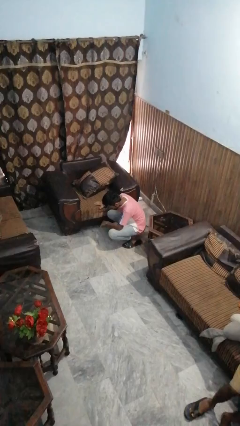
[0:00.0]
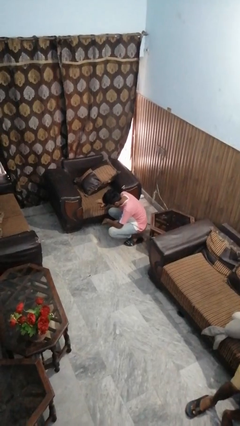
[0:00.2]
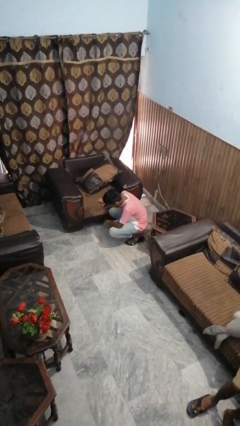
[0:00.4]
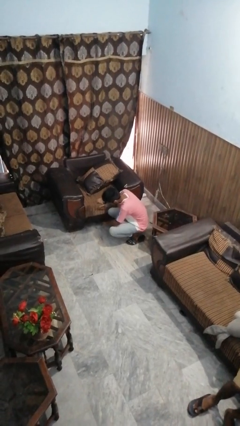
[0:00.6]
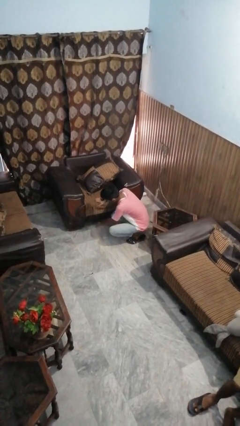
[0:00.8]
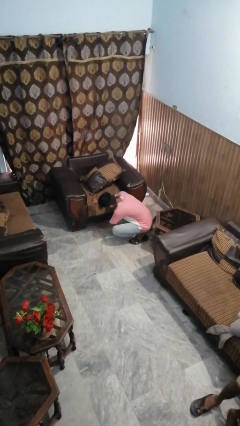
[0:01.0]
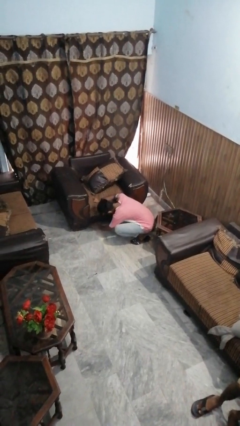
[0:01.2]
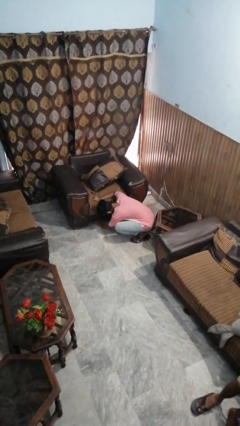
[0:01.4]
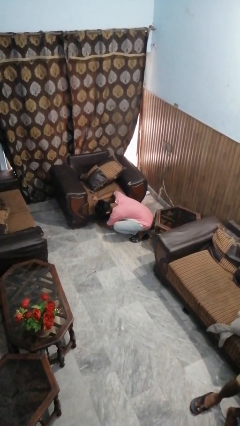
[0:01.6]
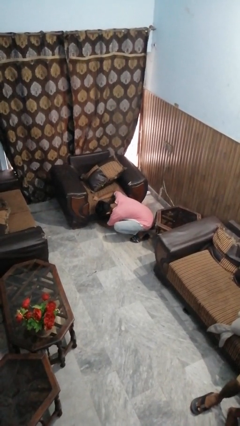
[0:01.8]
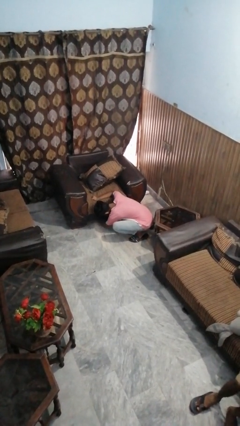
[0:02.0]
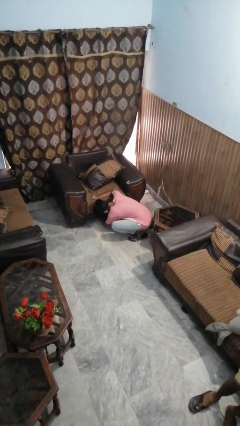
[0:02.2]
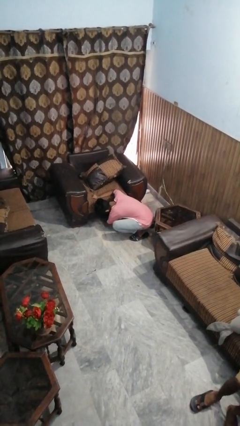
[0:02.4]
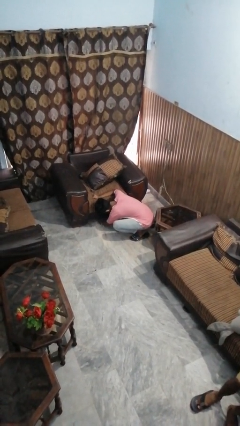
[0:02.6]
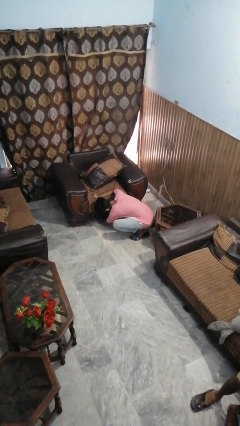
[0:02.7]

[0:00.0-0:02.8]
person searches under couch

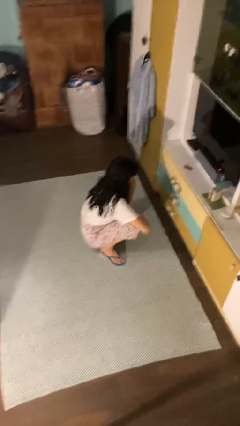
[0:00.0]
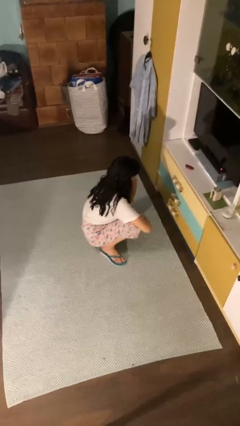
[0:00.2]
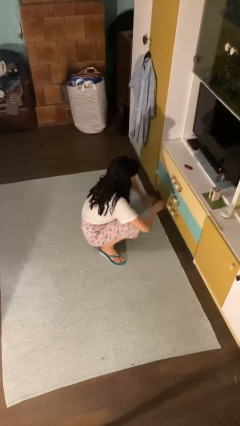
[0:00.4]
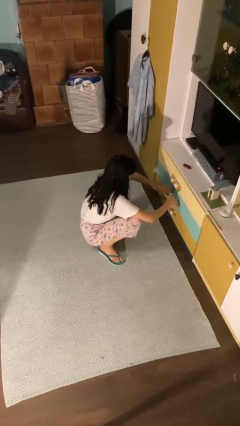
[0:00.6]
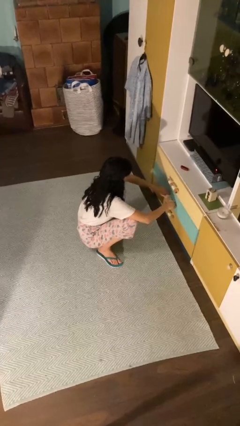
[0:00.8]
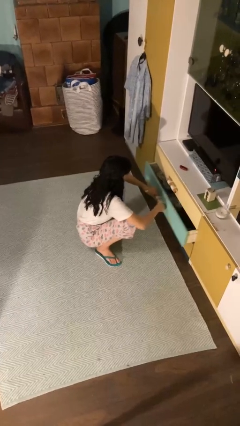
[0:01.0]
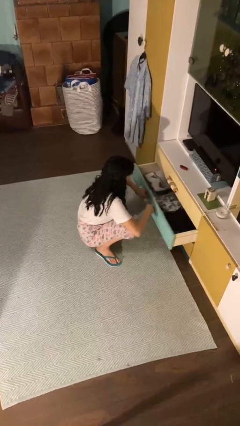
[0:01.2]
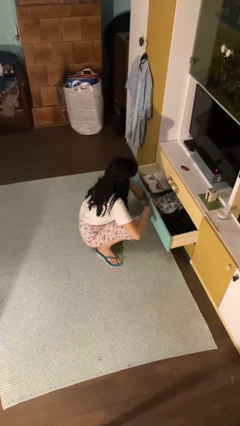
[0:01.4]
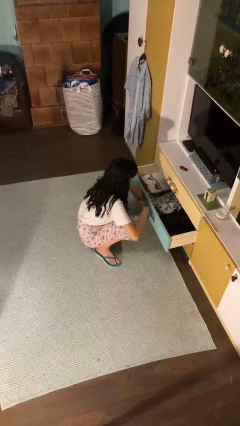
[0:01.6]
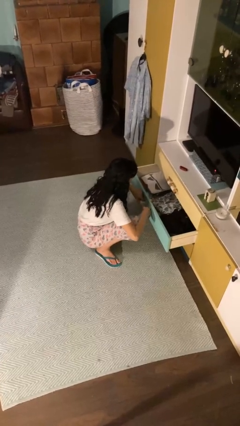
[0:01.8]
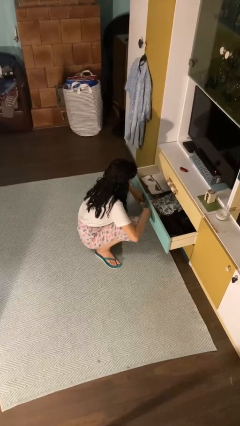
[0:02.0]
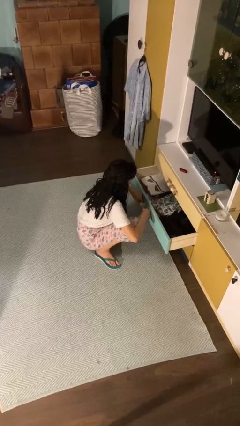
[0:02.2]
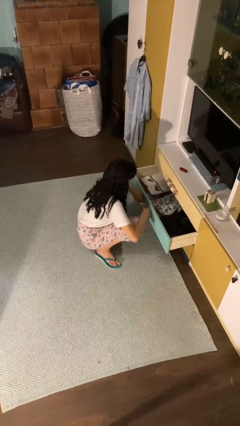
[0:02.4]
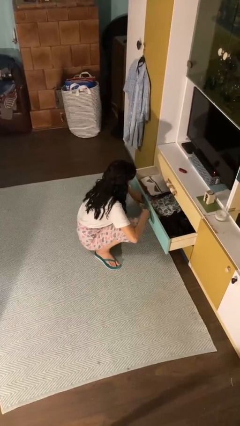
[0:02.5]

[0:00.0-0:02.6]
person opens dresser drawer

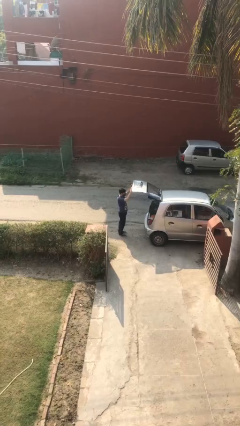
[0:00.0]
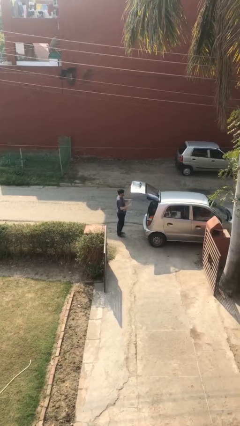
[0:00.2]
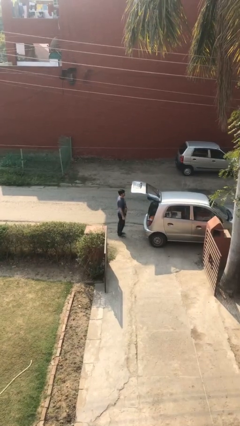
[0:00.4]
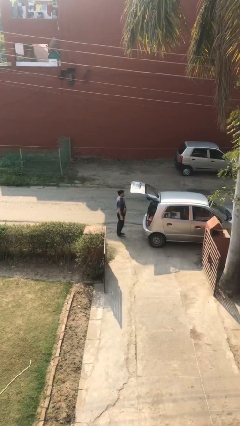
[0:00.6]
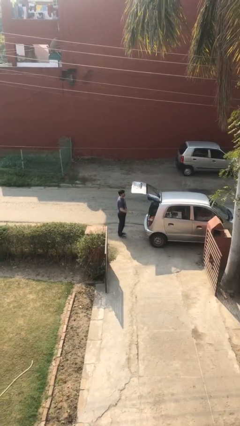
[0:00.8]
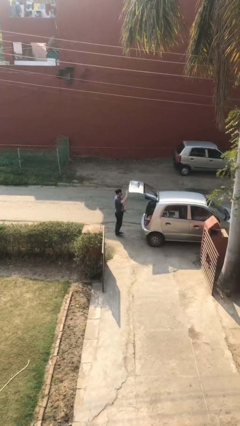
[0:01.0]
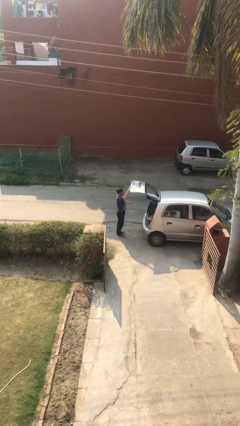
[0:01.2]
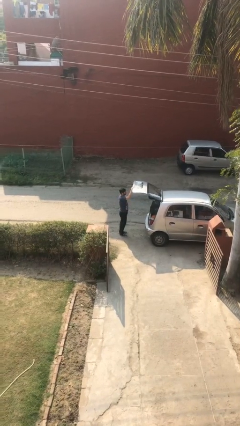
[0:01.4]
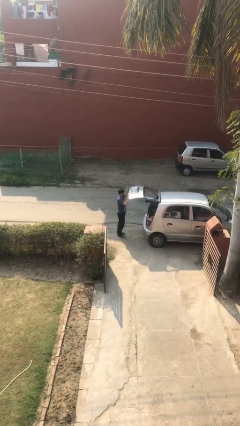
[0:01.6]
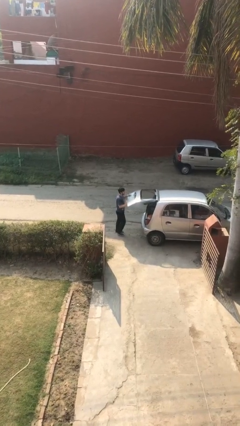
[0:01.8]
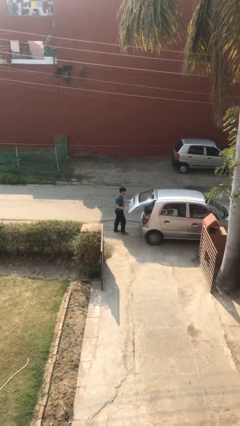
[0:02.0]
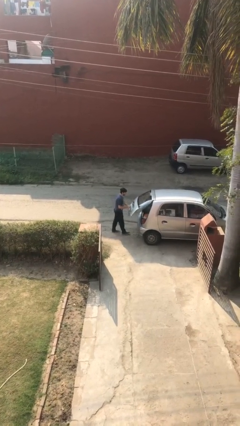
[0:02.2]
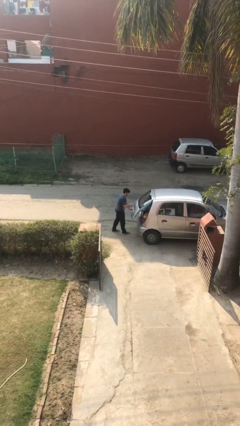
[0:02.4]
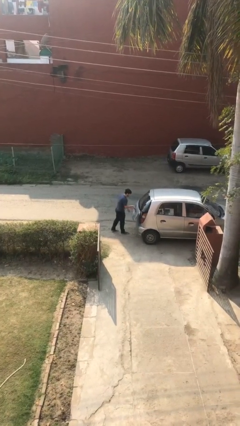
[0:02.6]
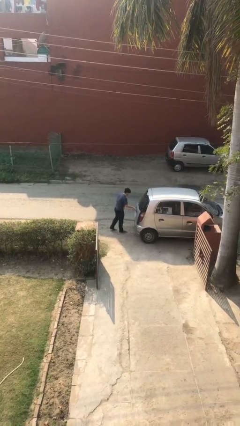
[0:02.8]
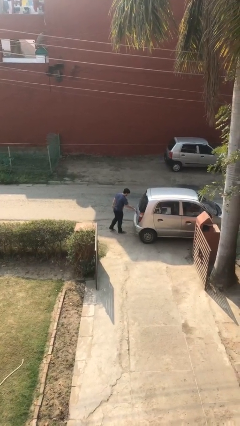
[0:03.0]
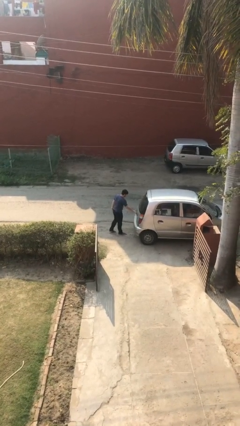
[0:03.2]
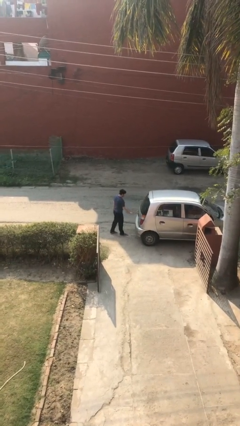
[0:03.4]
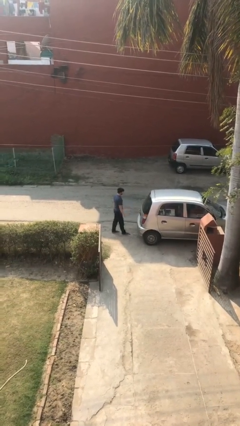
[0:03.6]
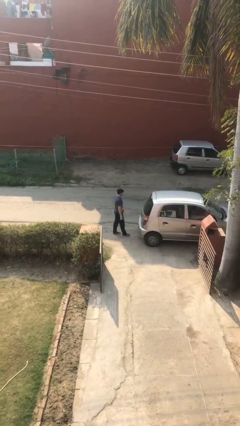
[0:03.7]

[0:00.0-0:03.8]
person closes car trunk

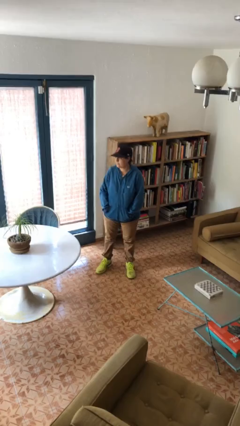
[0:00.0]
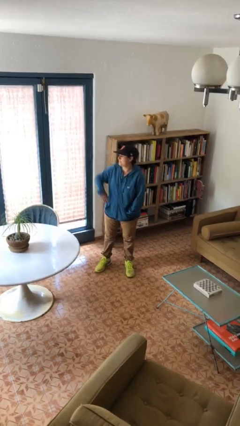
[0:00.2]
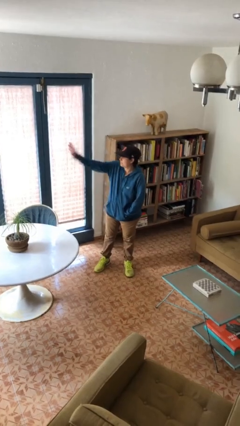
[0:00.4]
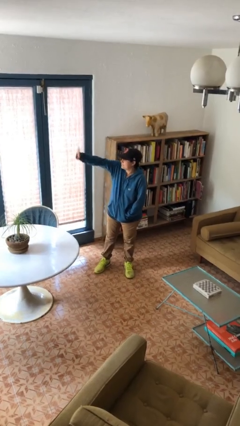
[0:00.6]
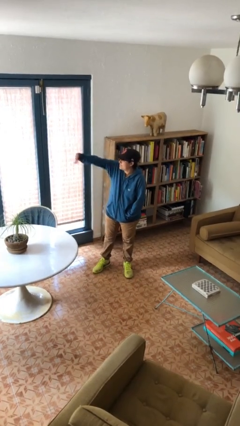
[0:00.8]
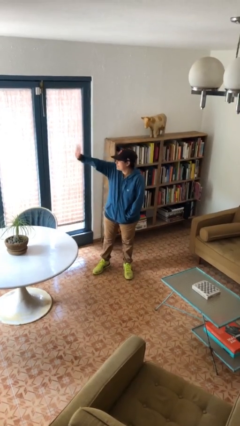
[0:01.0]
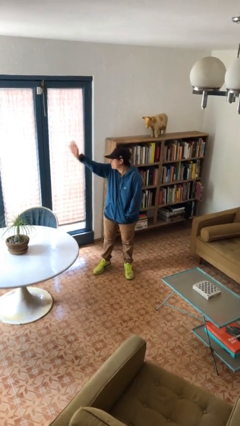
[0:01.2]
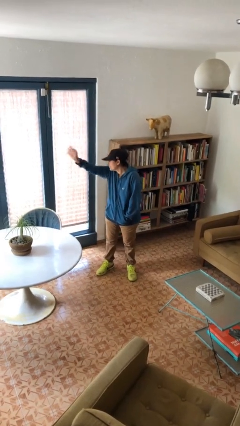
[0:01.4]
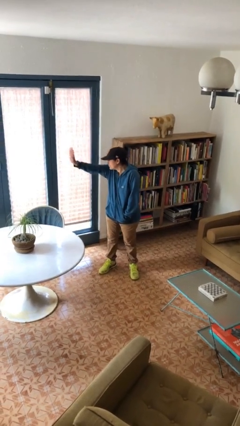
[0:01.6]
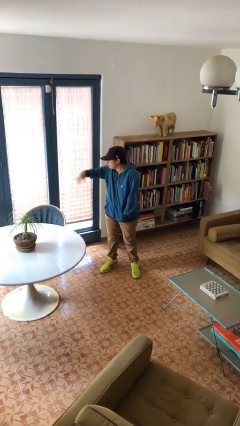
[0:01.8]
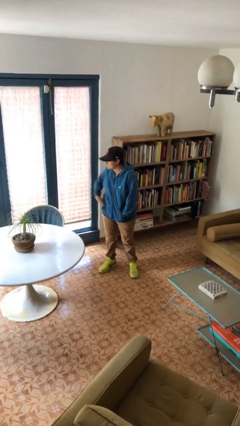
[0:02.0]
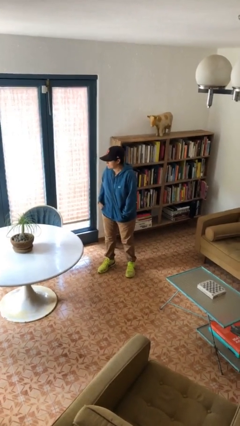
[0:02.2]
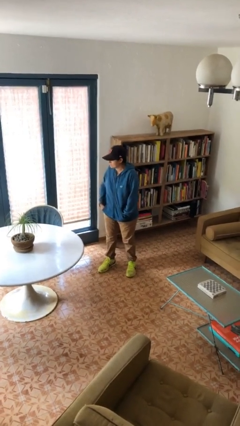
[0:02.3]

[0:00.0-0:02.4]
person waves at person

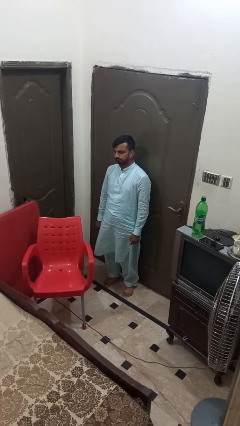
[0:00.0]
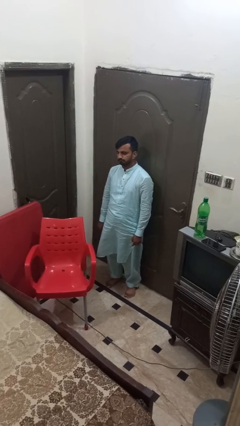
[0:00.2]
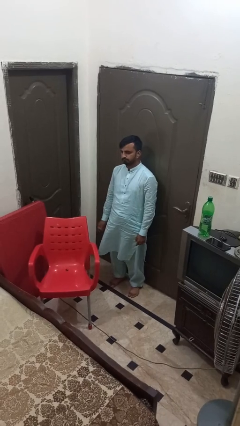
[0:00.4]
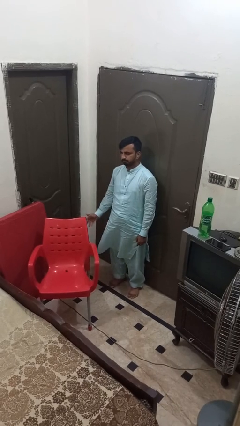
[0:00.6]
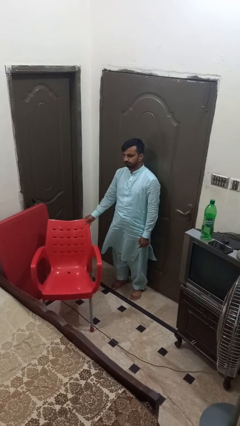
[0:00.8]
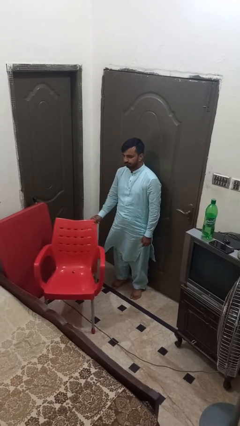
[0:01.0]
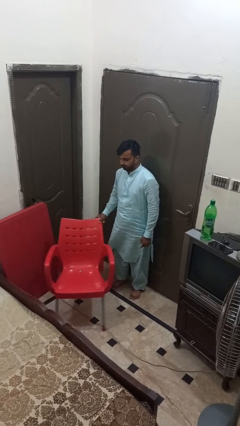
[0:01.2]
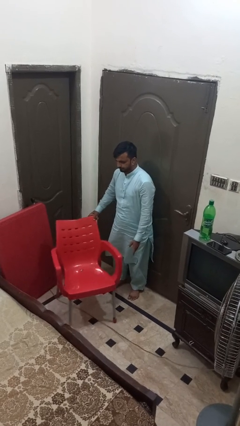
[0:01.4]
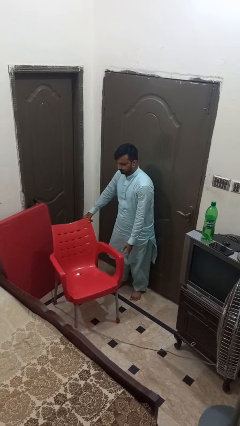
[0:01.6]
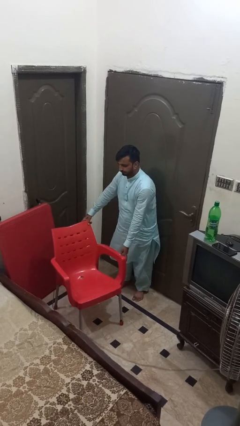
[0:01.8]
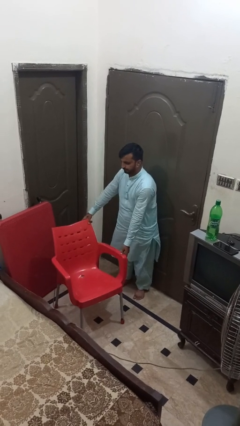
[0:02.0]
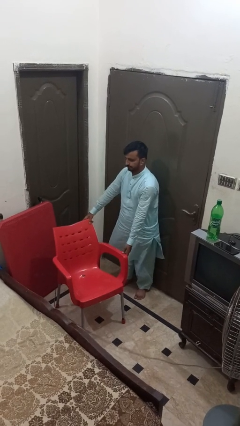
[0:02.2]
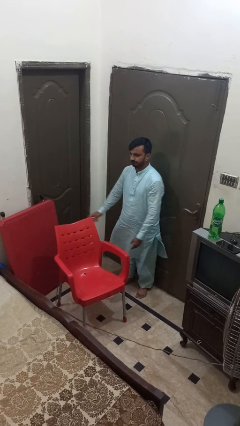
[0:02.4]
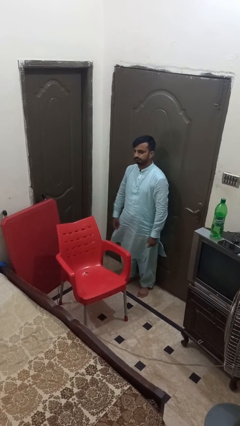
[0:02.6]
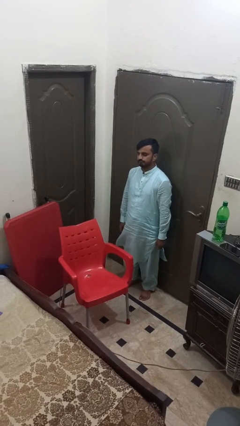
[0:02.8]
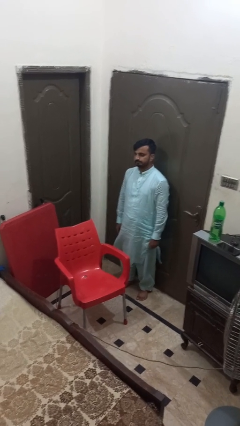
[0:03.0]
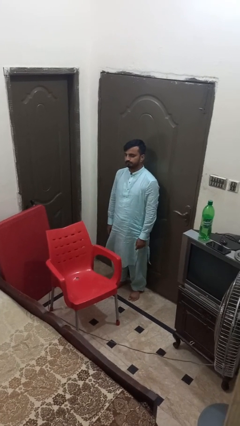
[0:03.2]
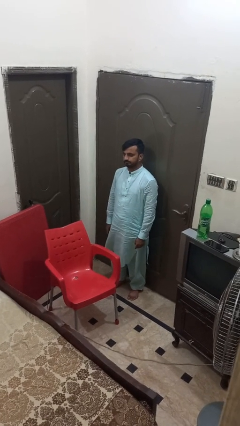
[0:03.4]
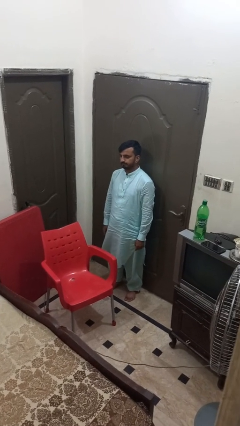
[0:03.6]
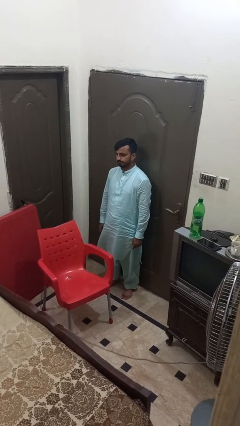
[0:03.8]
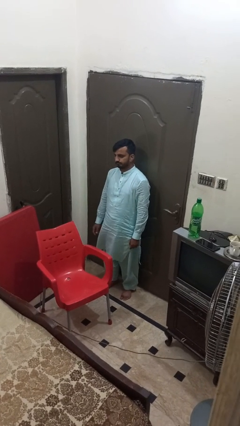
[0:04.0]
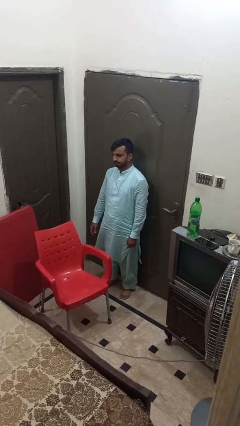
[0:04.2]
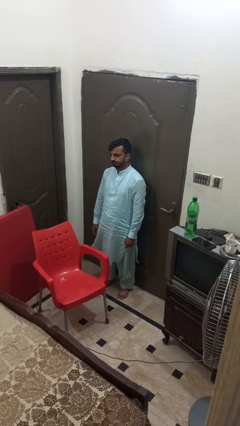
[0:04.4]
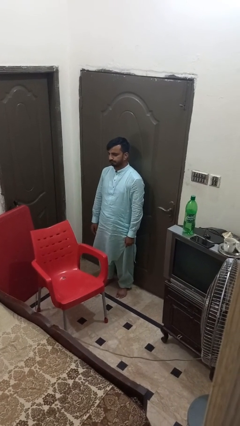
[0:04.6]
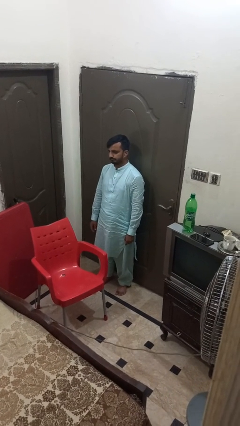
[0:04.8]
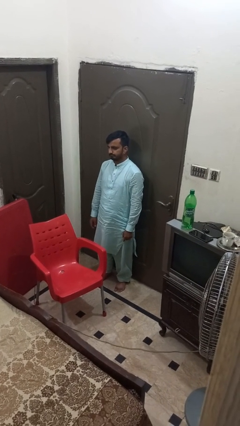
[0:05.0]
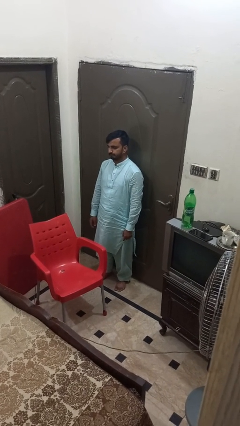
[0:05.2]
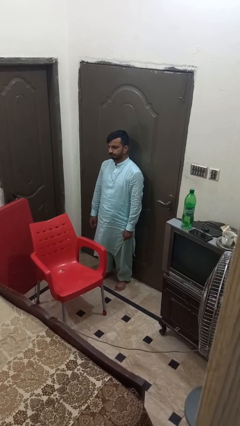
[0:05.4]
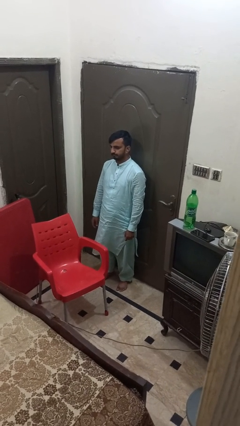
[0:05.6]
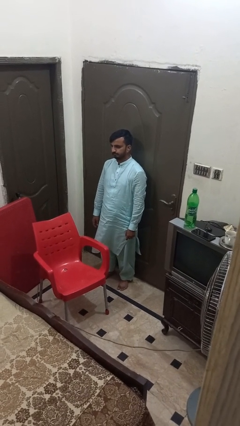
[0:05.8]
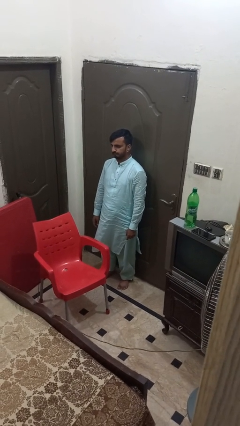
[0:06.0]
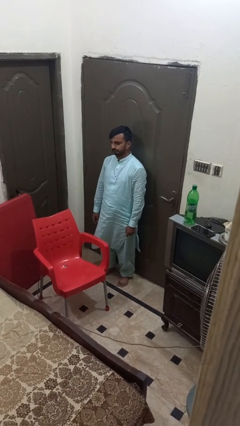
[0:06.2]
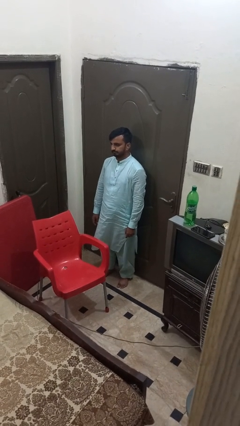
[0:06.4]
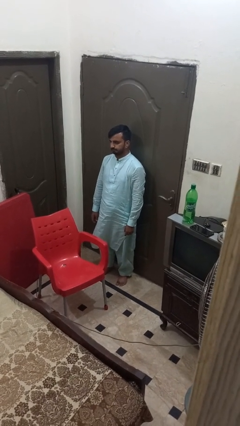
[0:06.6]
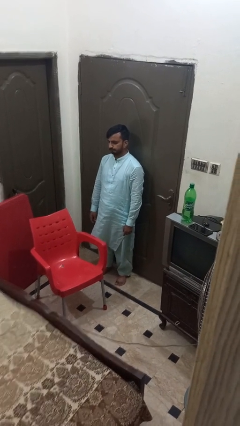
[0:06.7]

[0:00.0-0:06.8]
person sets upright furniture
